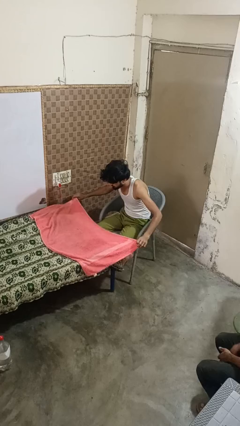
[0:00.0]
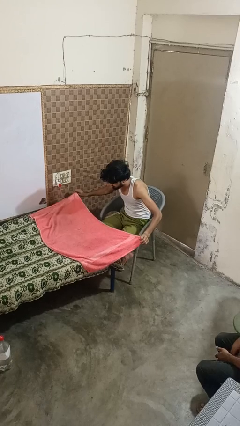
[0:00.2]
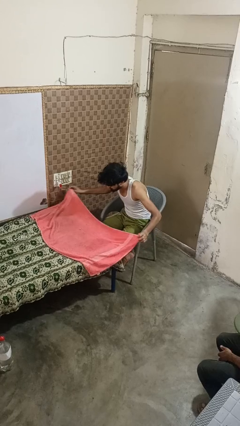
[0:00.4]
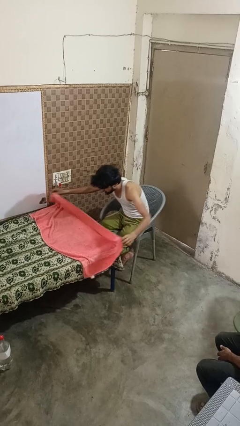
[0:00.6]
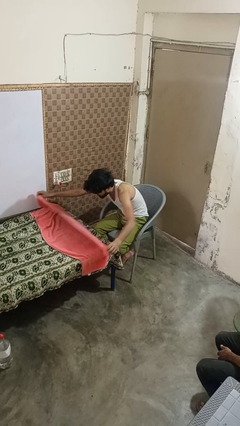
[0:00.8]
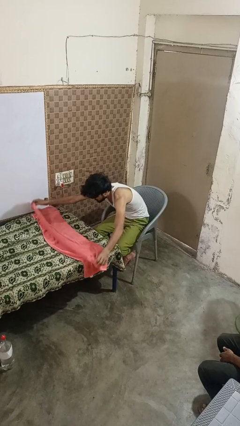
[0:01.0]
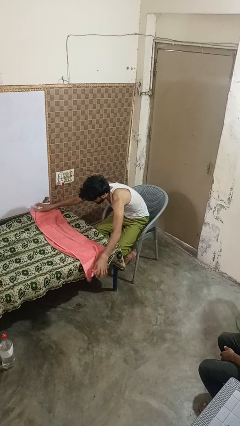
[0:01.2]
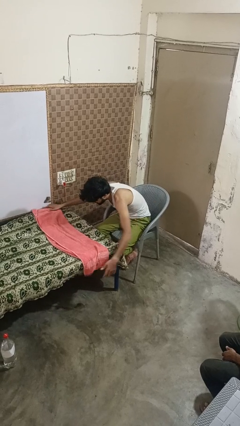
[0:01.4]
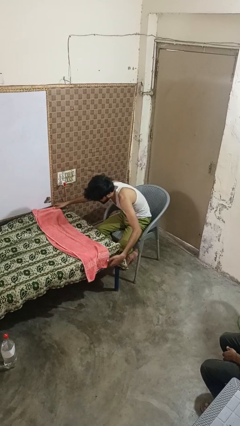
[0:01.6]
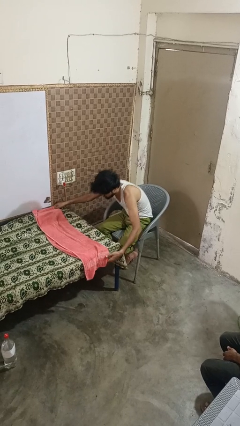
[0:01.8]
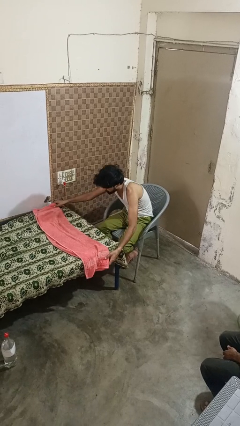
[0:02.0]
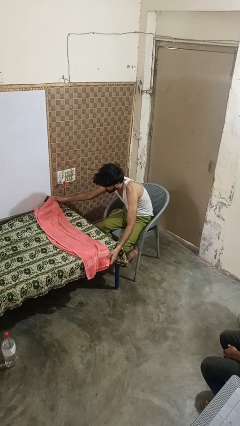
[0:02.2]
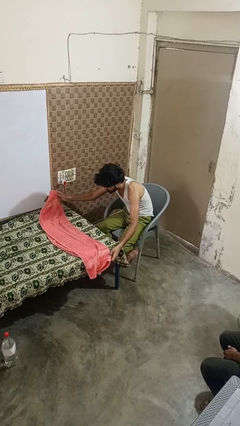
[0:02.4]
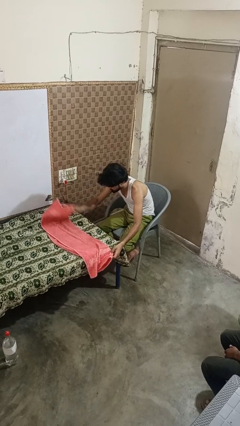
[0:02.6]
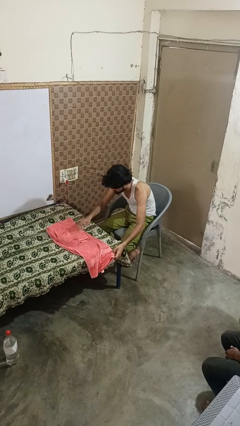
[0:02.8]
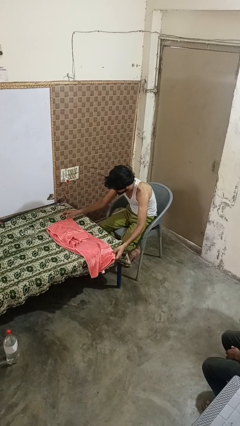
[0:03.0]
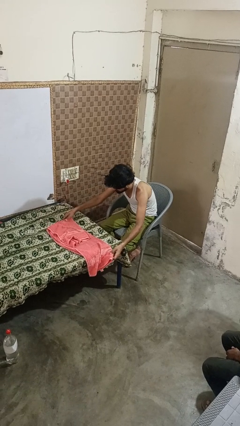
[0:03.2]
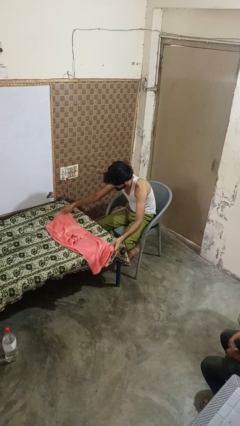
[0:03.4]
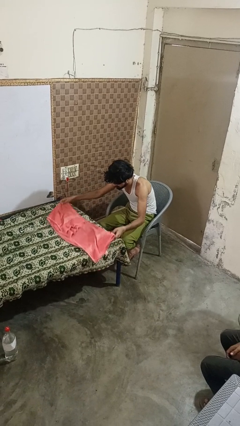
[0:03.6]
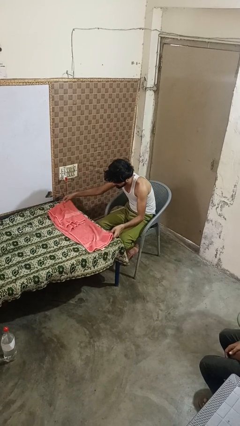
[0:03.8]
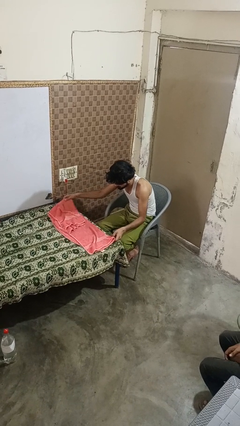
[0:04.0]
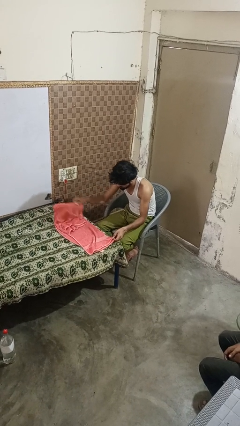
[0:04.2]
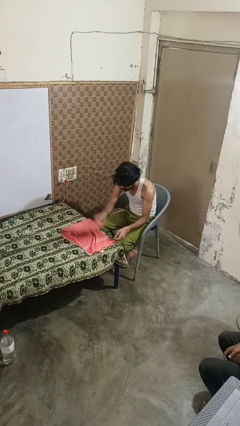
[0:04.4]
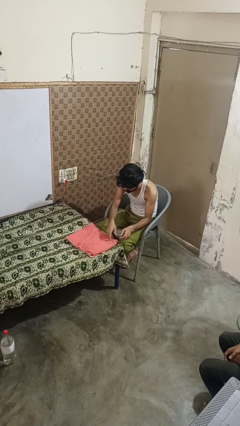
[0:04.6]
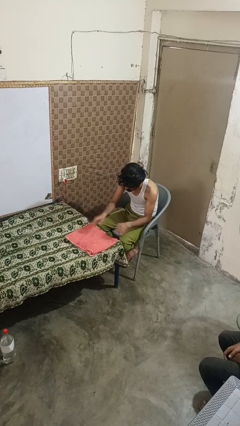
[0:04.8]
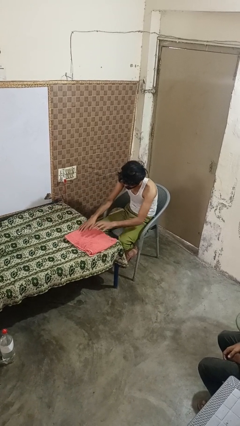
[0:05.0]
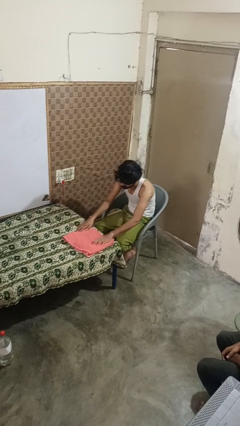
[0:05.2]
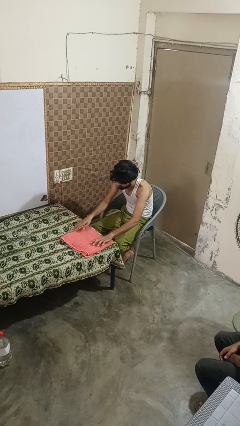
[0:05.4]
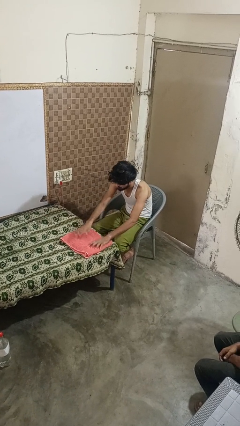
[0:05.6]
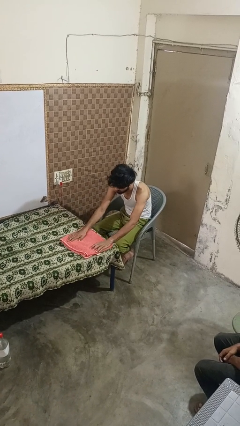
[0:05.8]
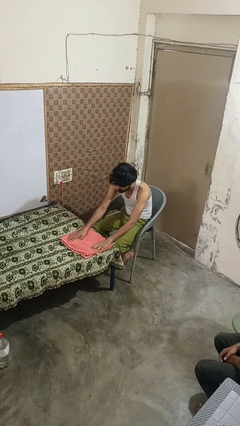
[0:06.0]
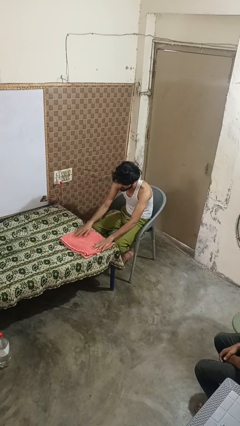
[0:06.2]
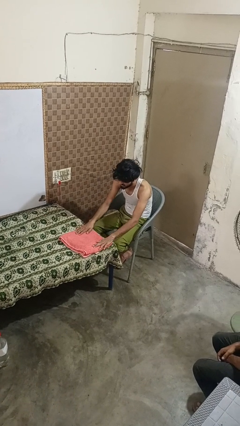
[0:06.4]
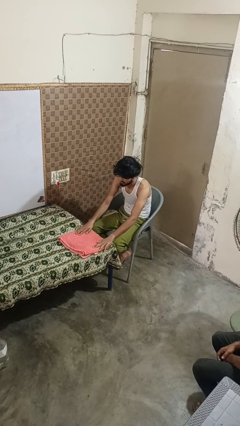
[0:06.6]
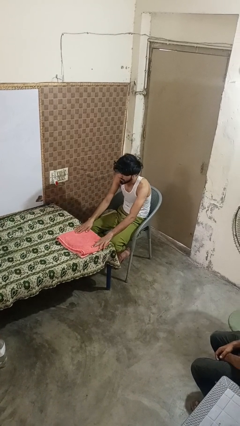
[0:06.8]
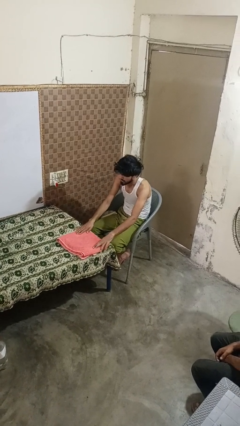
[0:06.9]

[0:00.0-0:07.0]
person folds towel

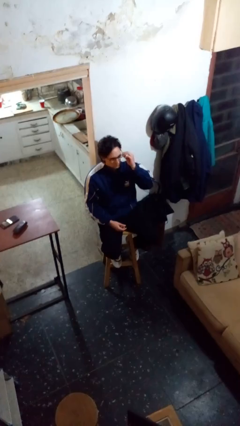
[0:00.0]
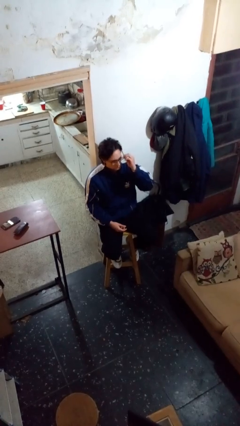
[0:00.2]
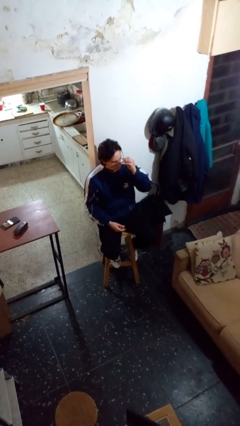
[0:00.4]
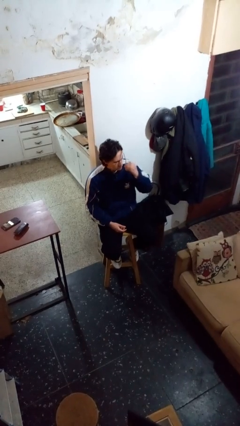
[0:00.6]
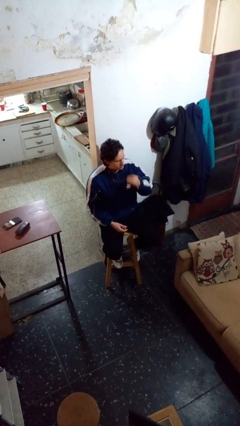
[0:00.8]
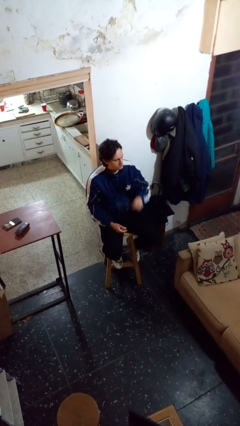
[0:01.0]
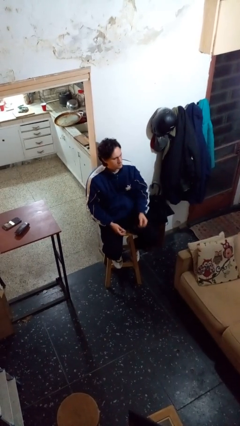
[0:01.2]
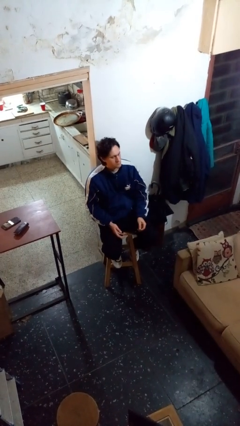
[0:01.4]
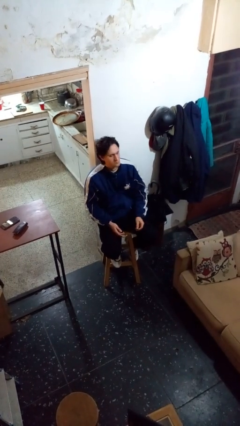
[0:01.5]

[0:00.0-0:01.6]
person takes off glasses

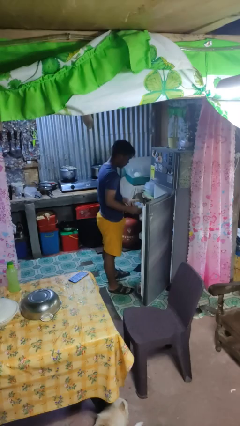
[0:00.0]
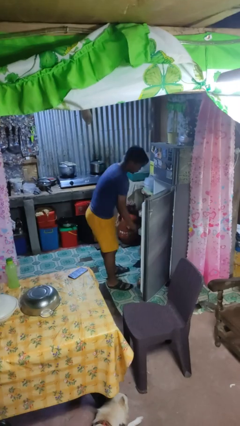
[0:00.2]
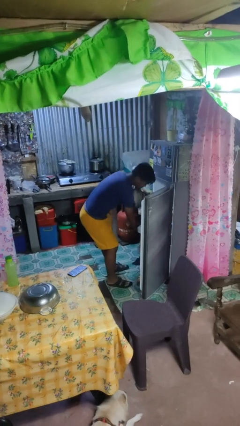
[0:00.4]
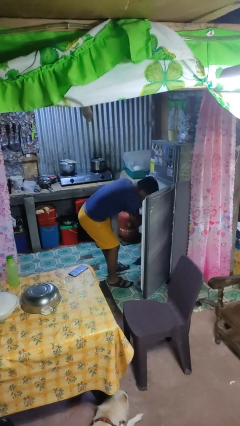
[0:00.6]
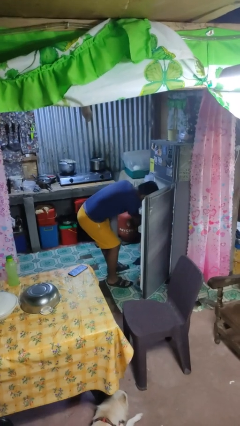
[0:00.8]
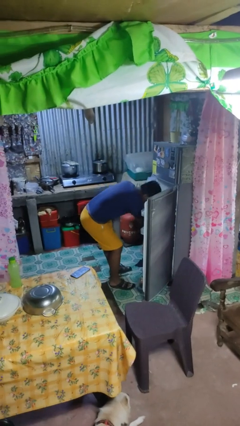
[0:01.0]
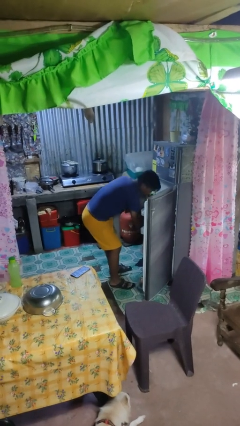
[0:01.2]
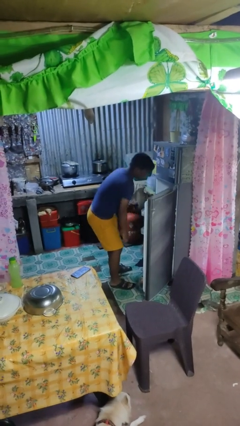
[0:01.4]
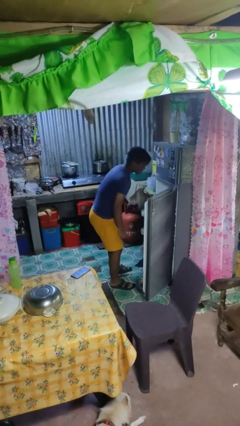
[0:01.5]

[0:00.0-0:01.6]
person puts object into refrigerator

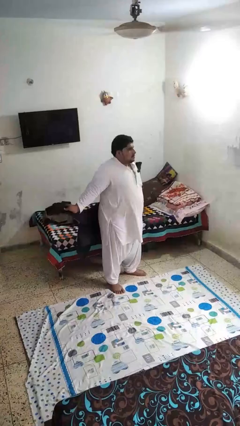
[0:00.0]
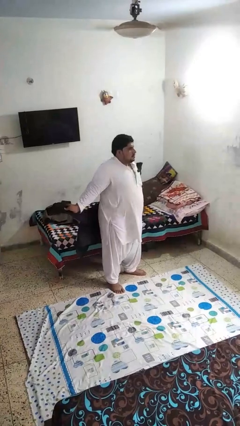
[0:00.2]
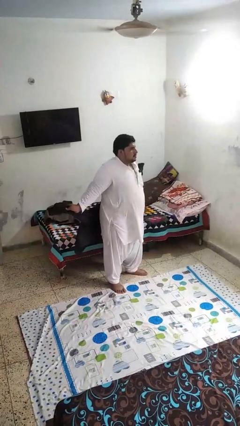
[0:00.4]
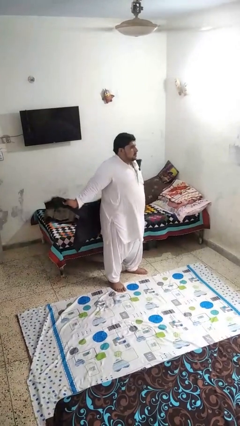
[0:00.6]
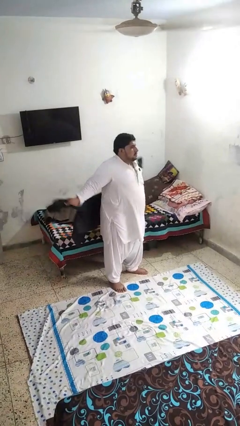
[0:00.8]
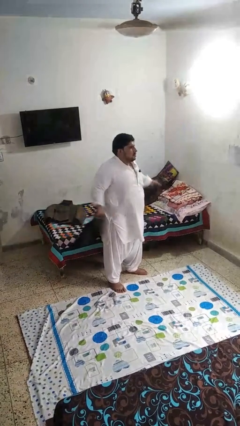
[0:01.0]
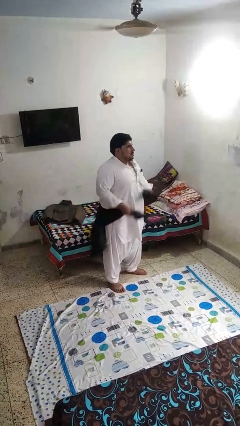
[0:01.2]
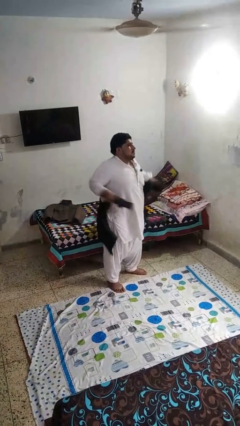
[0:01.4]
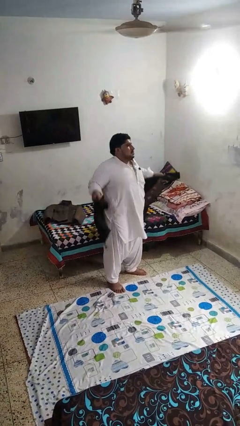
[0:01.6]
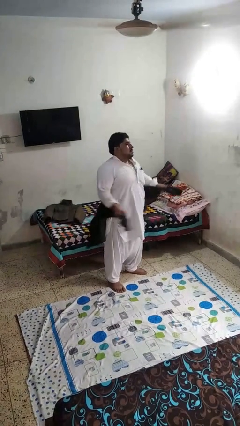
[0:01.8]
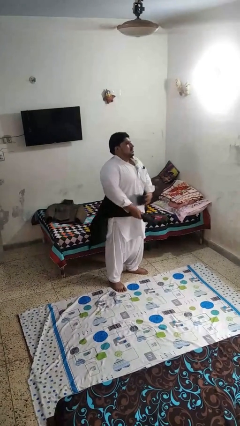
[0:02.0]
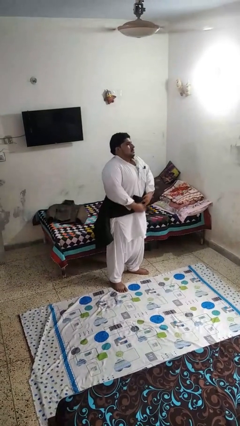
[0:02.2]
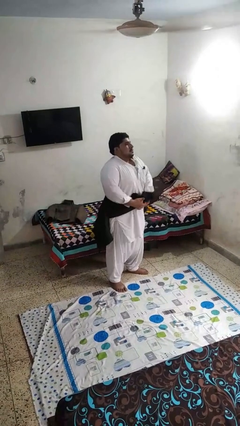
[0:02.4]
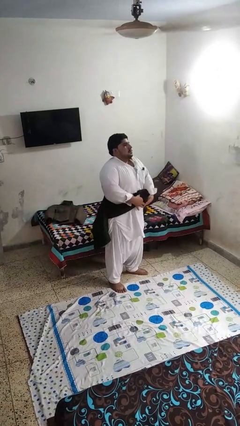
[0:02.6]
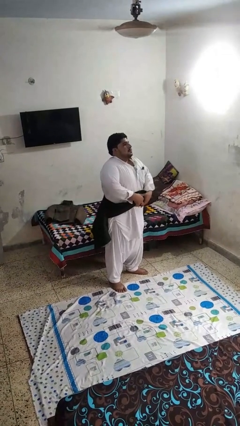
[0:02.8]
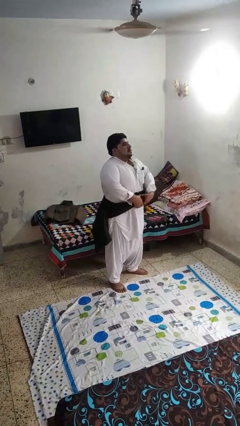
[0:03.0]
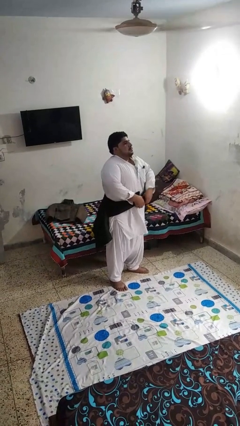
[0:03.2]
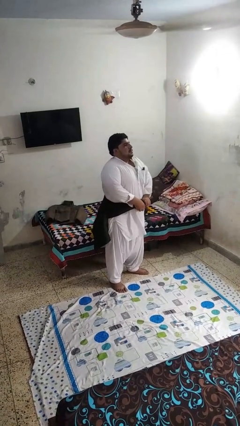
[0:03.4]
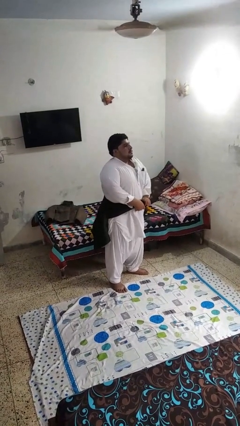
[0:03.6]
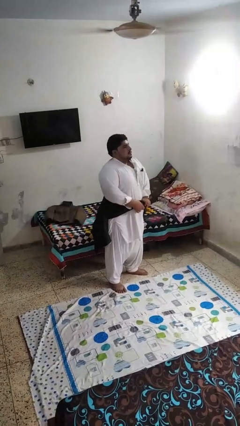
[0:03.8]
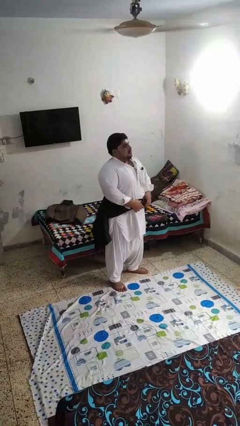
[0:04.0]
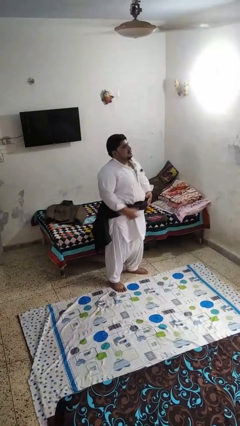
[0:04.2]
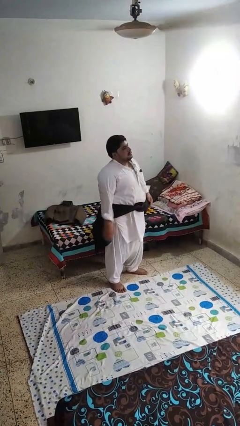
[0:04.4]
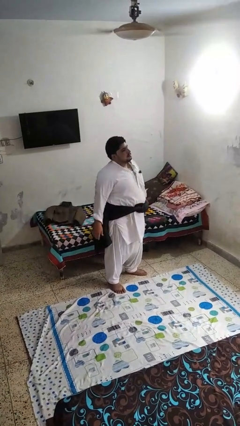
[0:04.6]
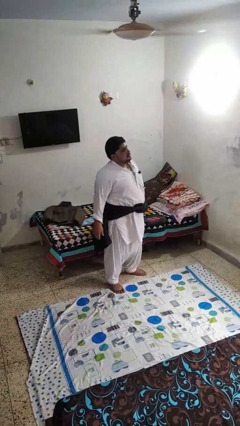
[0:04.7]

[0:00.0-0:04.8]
person ties jacket around waist

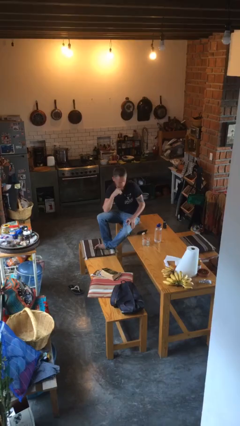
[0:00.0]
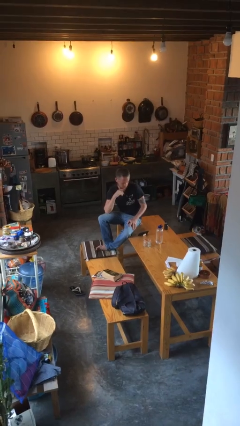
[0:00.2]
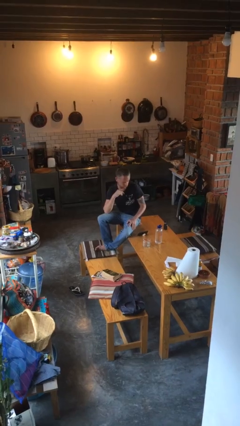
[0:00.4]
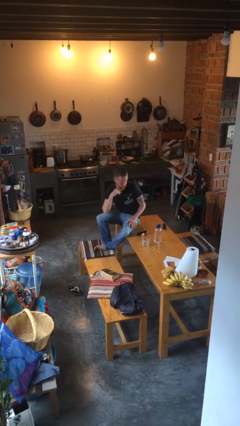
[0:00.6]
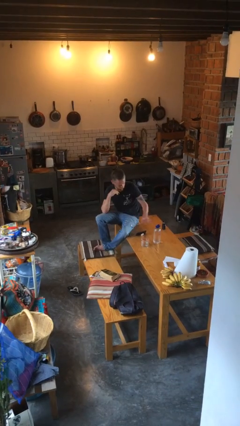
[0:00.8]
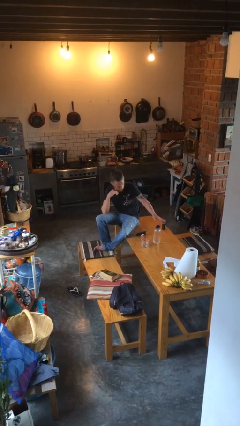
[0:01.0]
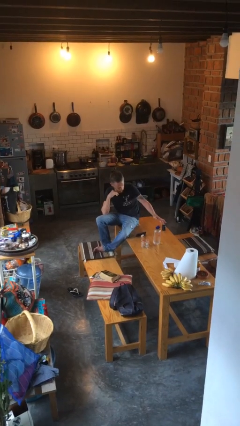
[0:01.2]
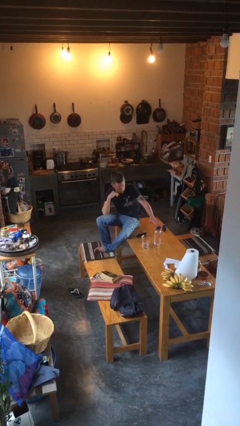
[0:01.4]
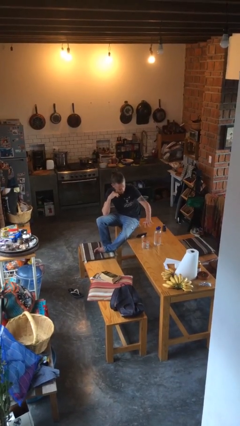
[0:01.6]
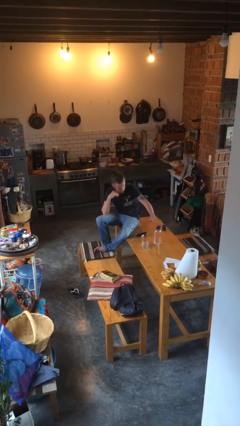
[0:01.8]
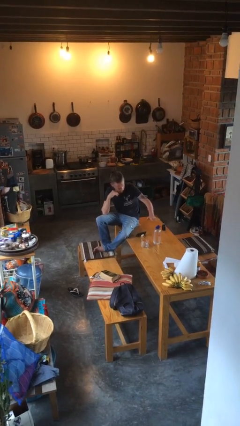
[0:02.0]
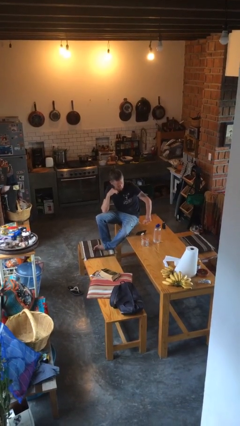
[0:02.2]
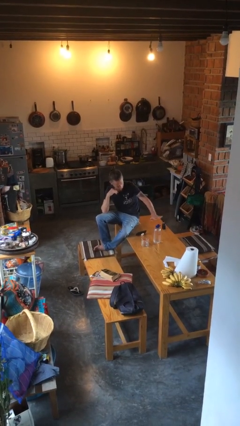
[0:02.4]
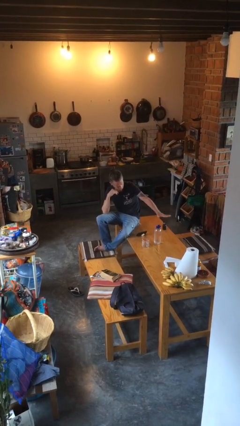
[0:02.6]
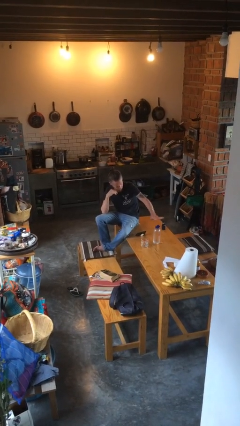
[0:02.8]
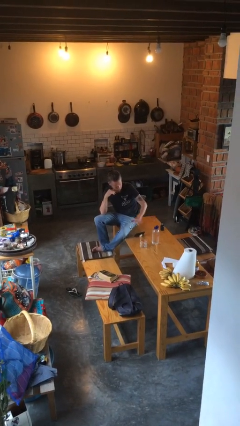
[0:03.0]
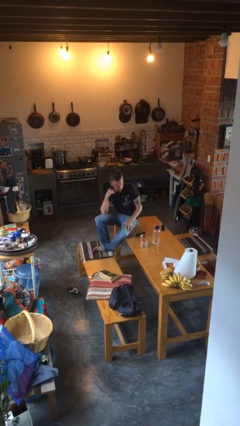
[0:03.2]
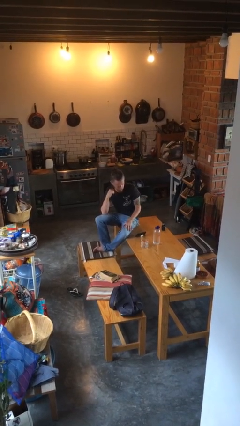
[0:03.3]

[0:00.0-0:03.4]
person waves hand over object
